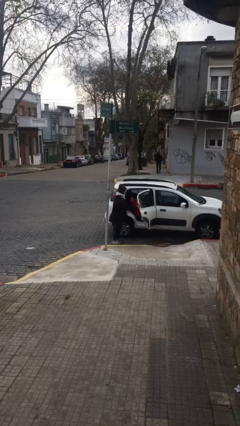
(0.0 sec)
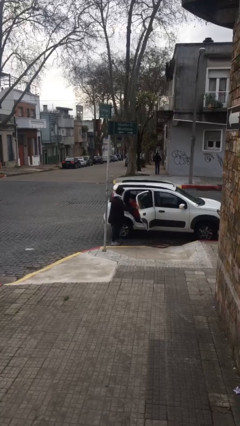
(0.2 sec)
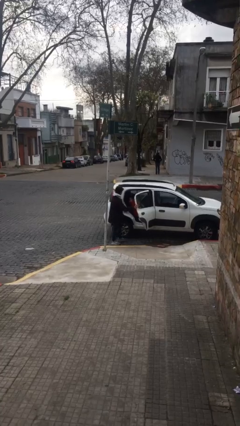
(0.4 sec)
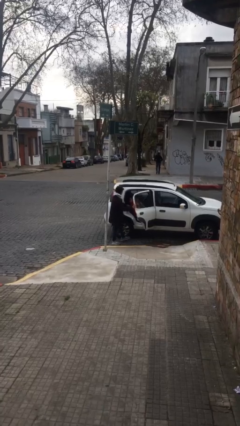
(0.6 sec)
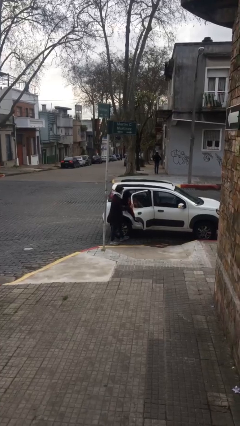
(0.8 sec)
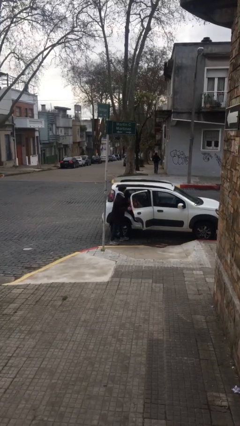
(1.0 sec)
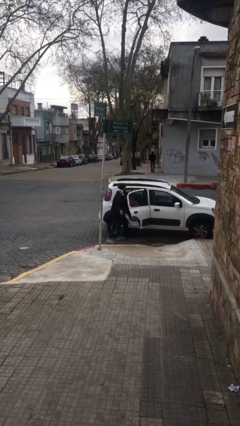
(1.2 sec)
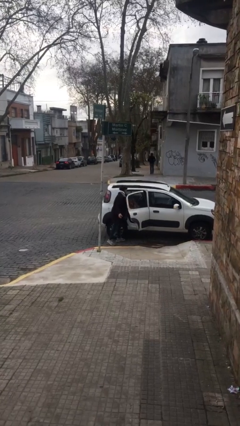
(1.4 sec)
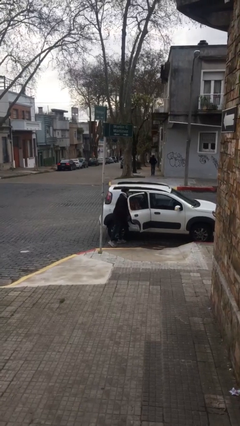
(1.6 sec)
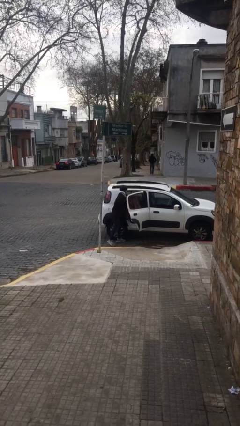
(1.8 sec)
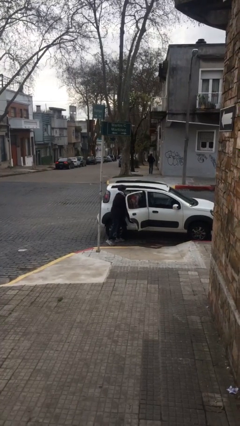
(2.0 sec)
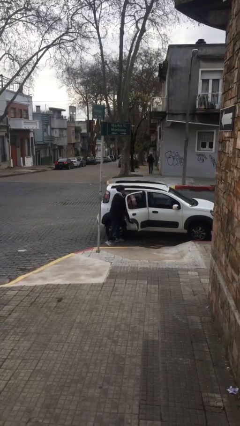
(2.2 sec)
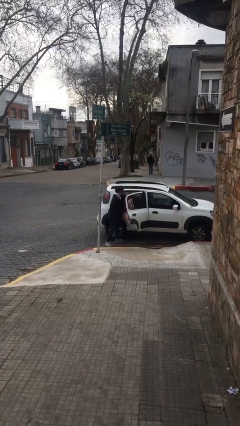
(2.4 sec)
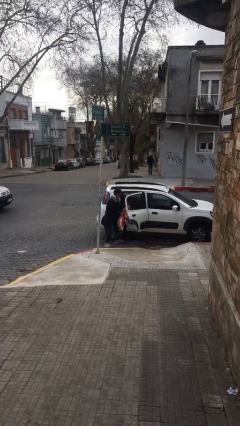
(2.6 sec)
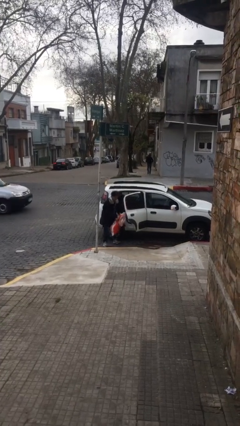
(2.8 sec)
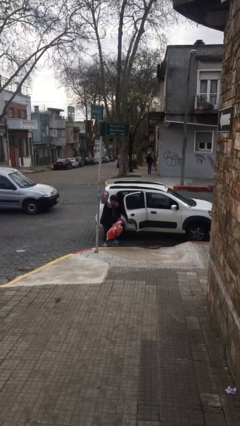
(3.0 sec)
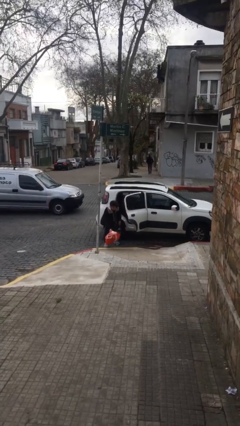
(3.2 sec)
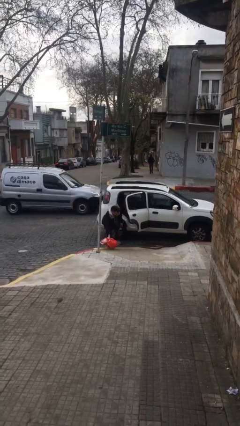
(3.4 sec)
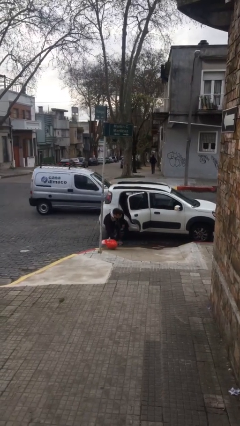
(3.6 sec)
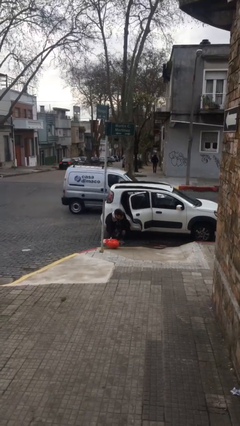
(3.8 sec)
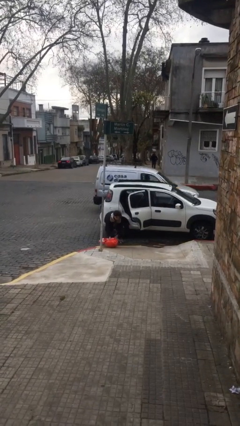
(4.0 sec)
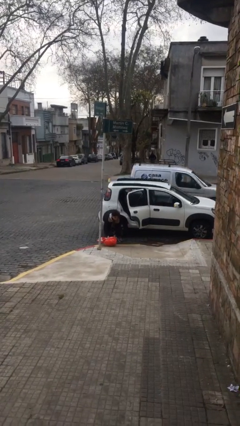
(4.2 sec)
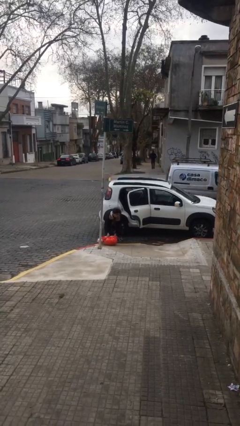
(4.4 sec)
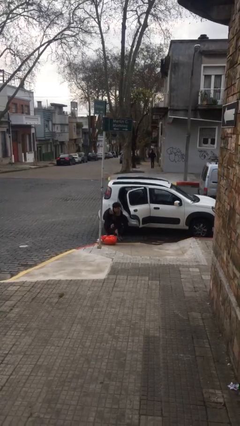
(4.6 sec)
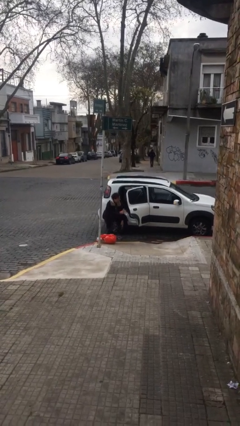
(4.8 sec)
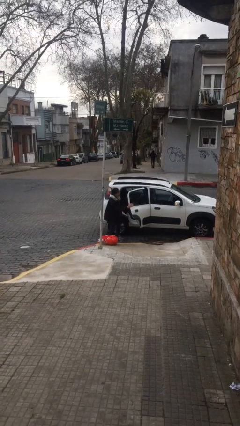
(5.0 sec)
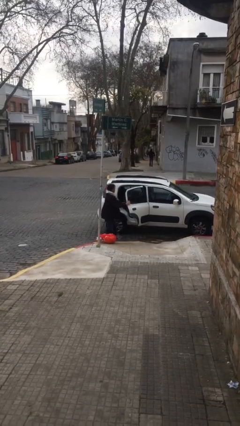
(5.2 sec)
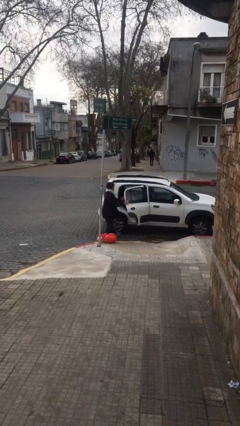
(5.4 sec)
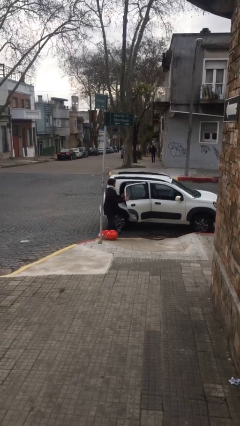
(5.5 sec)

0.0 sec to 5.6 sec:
person unloads car

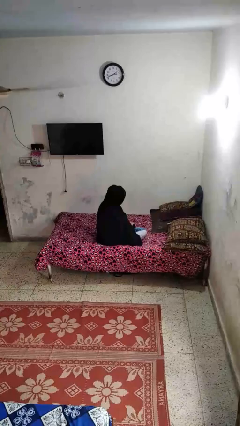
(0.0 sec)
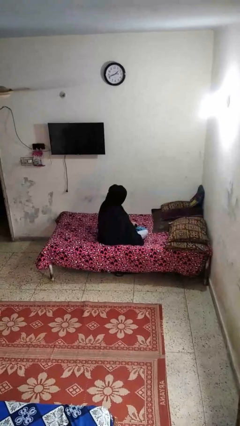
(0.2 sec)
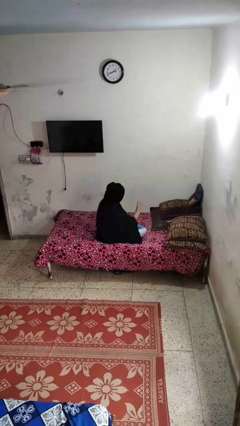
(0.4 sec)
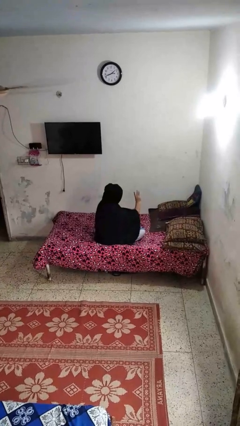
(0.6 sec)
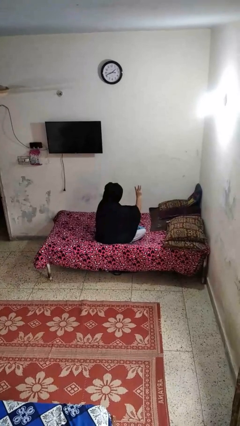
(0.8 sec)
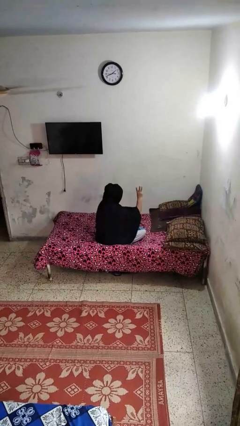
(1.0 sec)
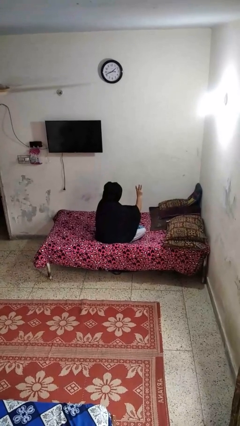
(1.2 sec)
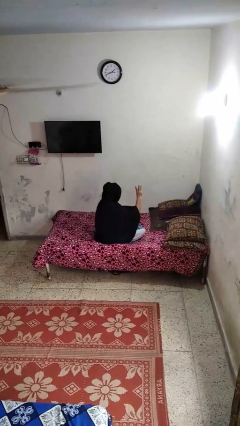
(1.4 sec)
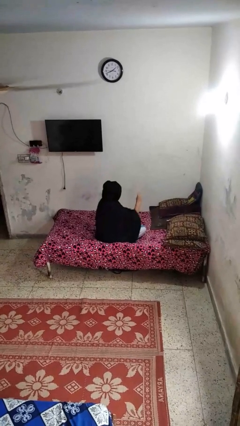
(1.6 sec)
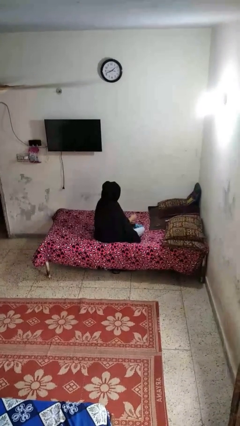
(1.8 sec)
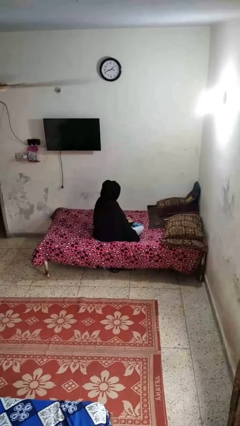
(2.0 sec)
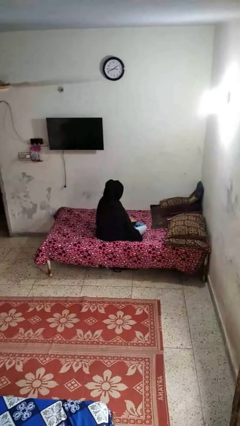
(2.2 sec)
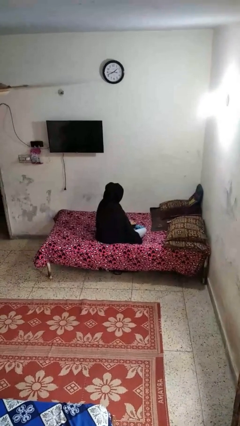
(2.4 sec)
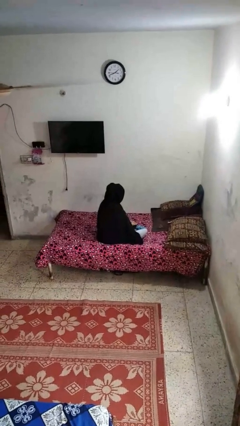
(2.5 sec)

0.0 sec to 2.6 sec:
person gestures number three

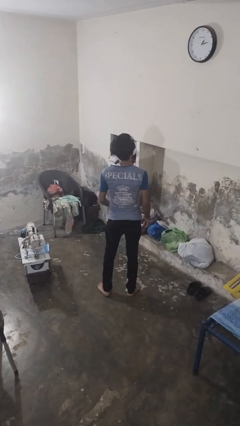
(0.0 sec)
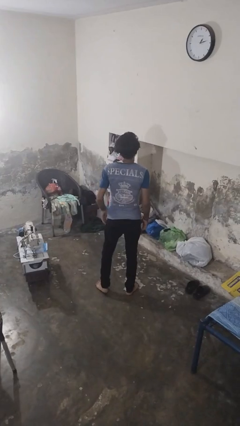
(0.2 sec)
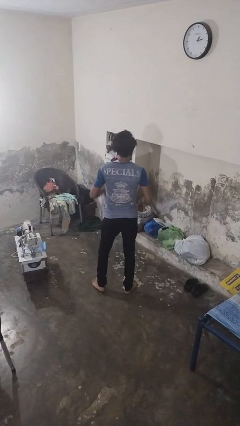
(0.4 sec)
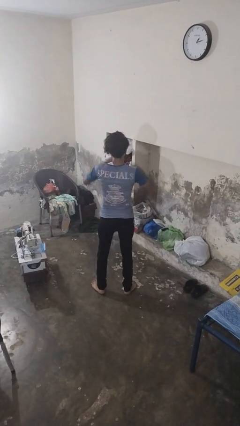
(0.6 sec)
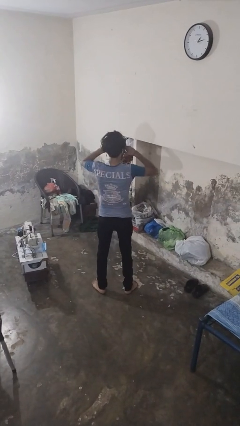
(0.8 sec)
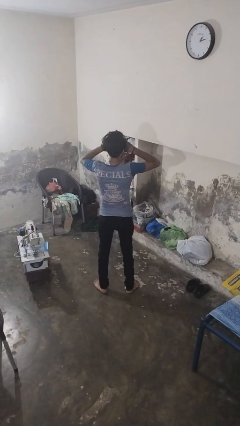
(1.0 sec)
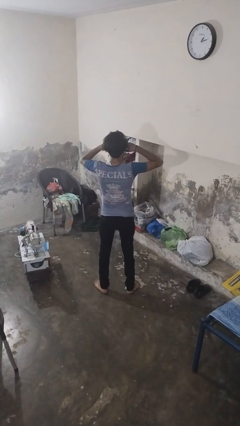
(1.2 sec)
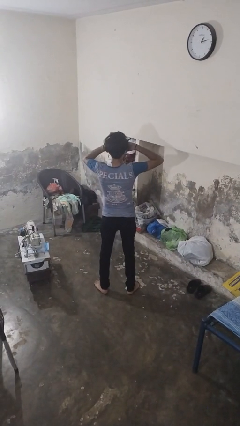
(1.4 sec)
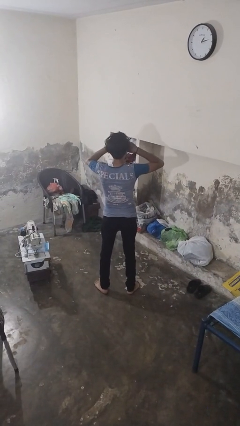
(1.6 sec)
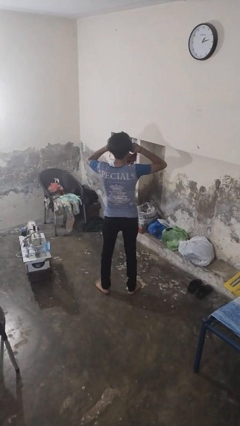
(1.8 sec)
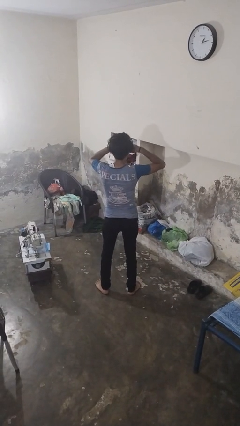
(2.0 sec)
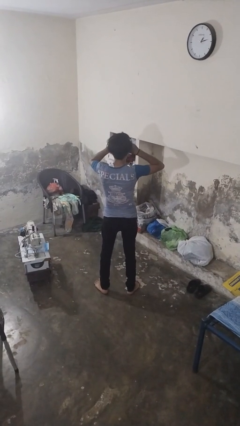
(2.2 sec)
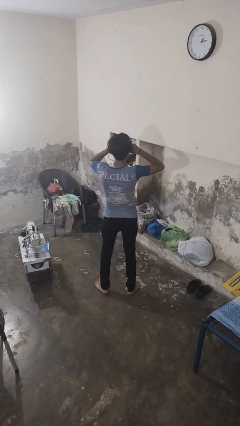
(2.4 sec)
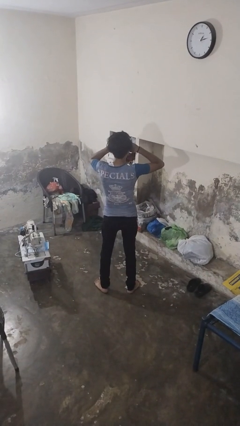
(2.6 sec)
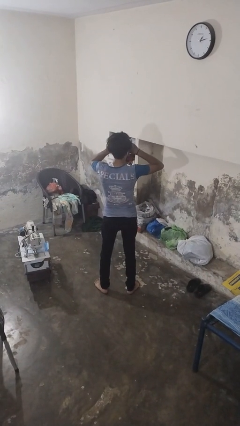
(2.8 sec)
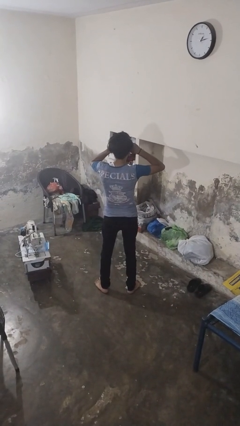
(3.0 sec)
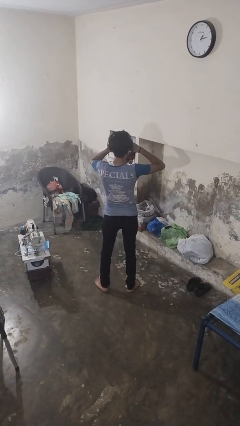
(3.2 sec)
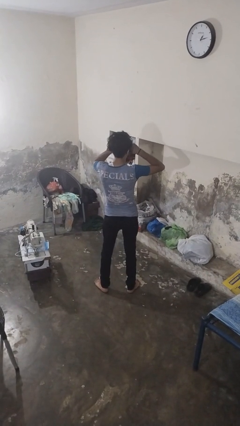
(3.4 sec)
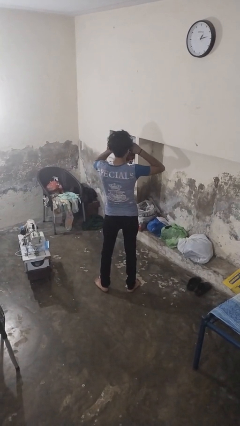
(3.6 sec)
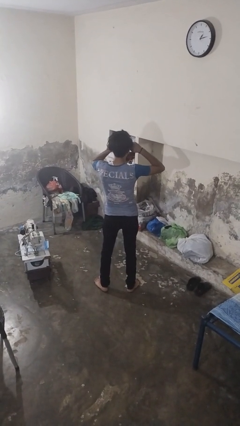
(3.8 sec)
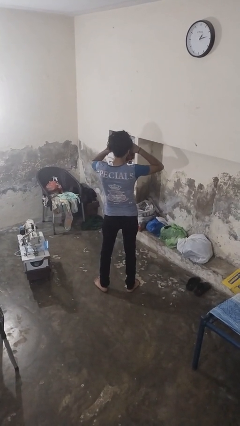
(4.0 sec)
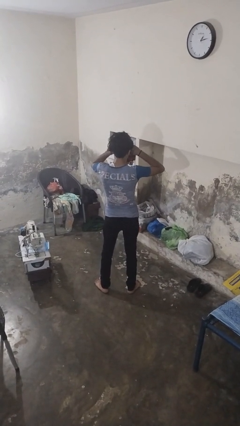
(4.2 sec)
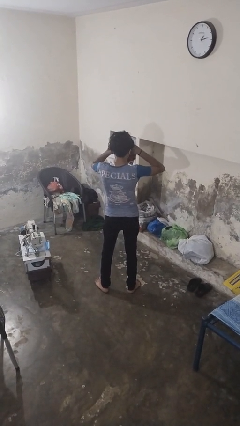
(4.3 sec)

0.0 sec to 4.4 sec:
person rubs eyes

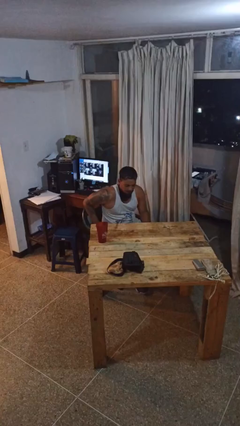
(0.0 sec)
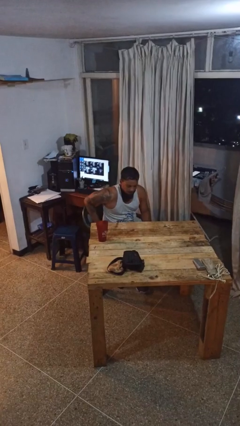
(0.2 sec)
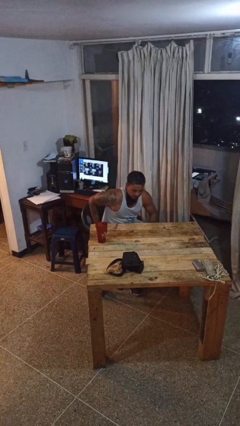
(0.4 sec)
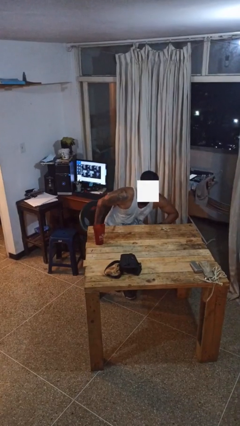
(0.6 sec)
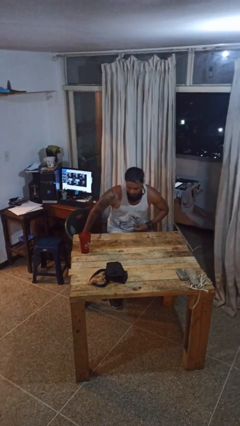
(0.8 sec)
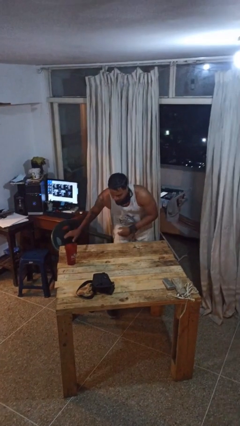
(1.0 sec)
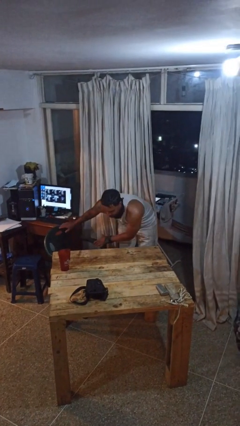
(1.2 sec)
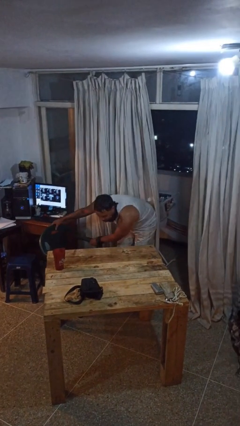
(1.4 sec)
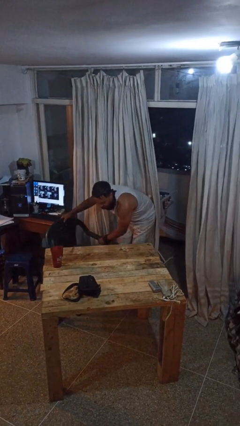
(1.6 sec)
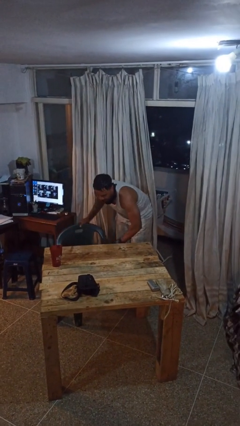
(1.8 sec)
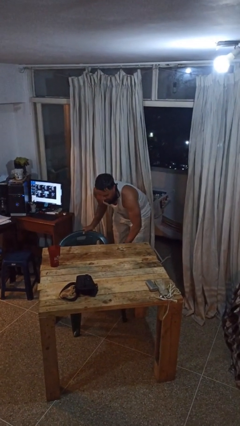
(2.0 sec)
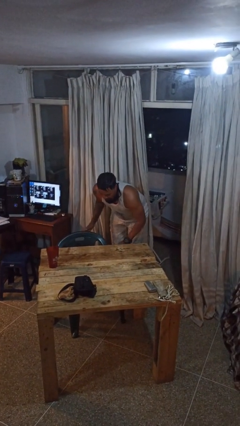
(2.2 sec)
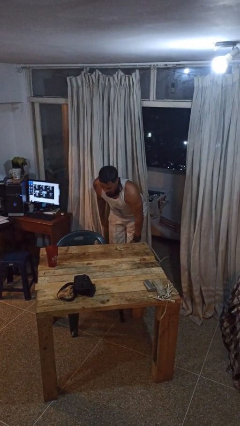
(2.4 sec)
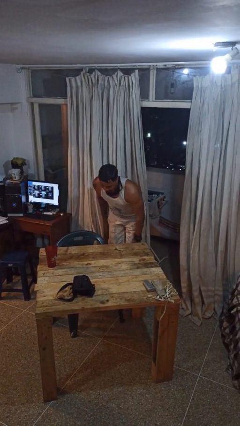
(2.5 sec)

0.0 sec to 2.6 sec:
person stands up

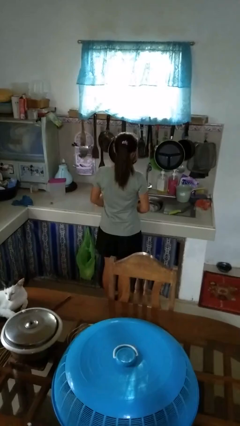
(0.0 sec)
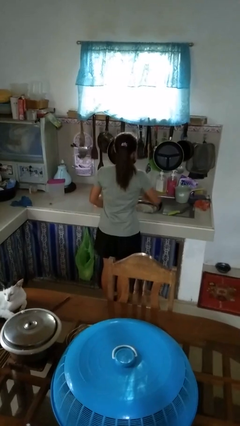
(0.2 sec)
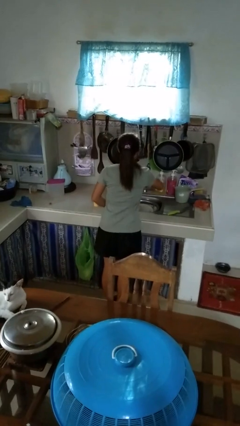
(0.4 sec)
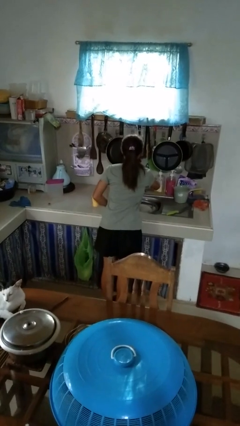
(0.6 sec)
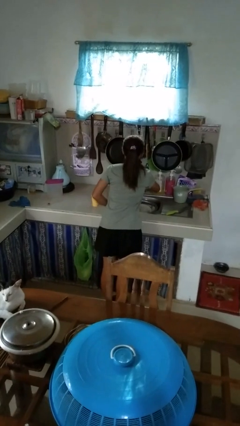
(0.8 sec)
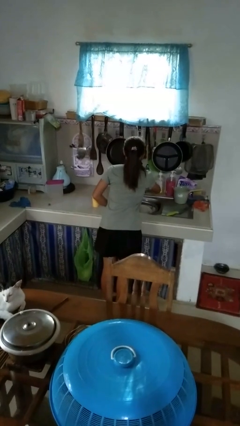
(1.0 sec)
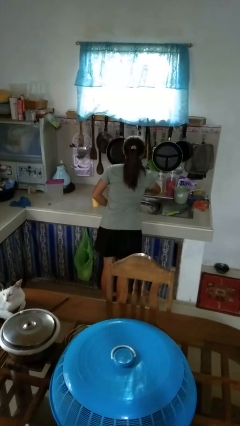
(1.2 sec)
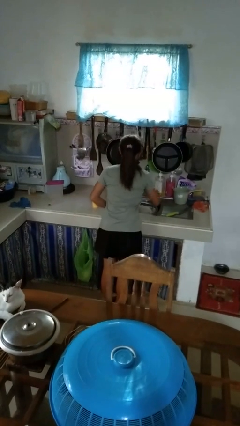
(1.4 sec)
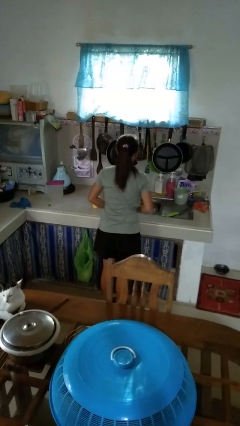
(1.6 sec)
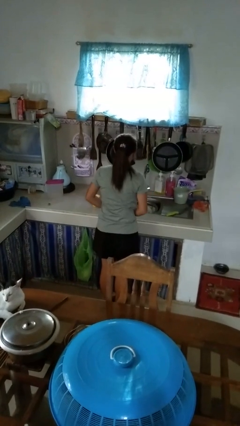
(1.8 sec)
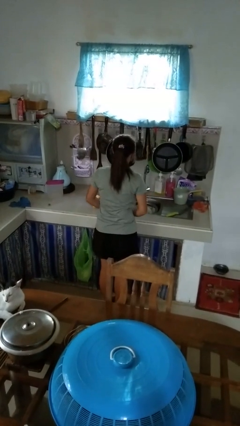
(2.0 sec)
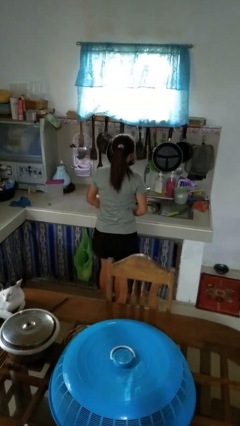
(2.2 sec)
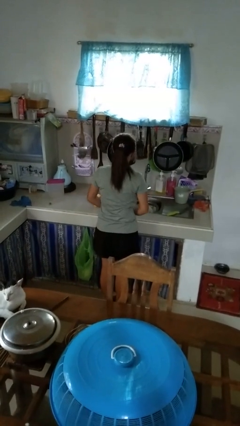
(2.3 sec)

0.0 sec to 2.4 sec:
person turns on faucet
